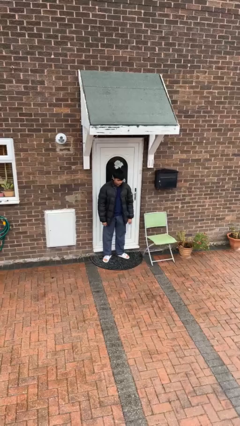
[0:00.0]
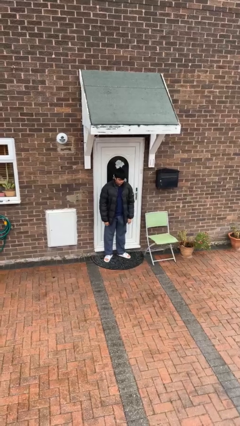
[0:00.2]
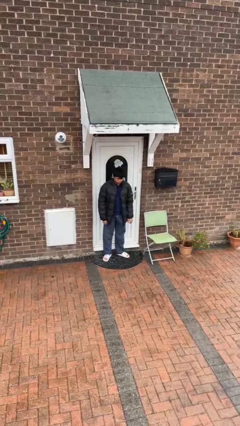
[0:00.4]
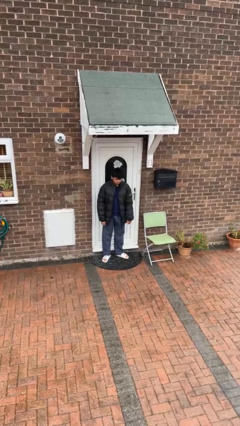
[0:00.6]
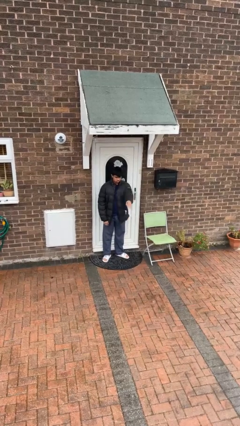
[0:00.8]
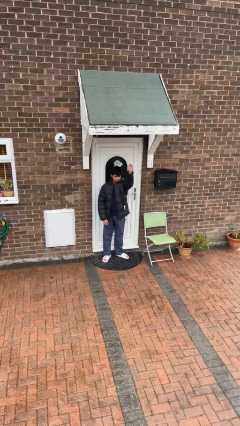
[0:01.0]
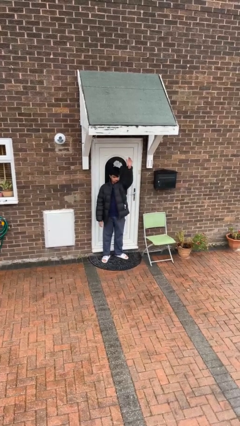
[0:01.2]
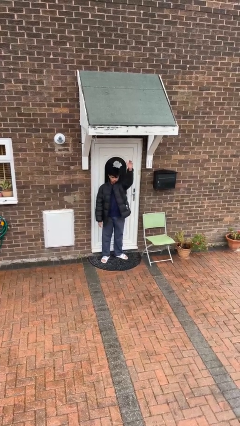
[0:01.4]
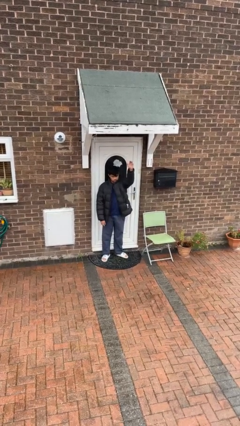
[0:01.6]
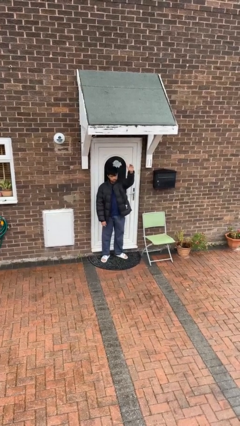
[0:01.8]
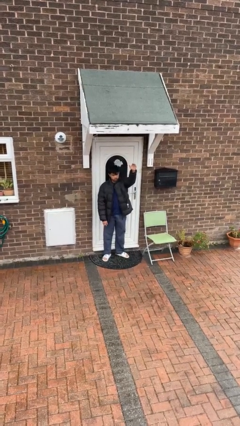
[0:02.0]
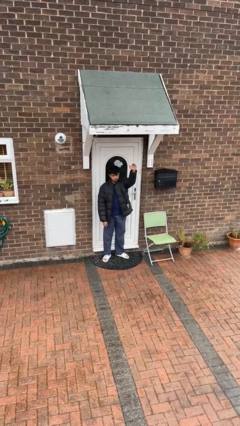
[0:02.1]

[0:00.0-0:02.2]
person gestures swipe up

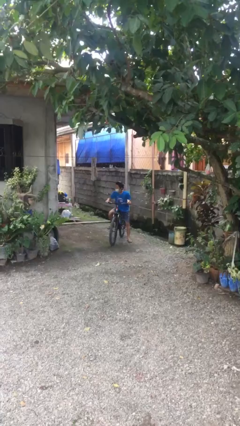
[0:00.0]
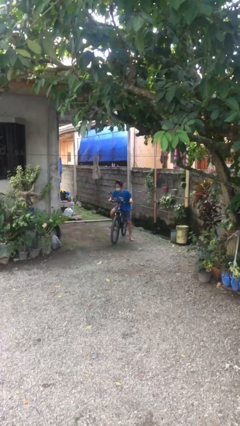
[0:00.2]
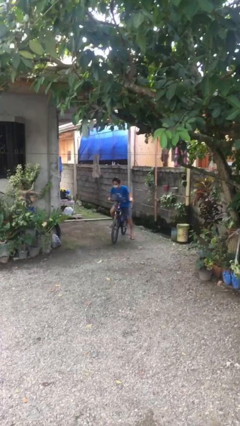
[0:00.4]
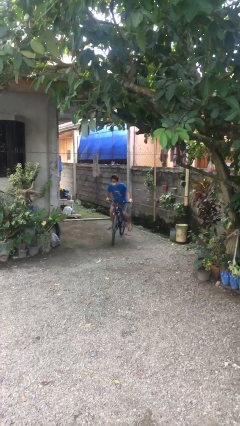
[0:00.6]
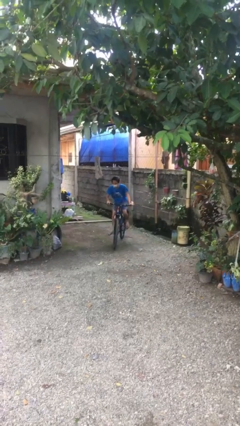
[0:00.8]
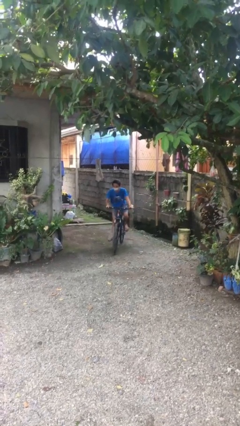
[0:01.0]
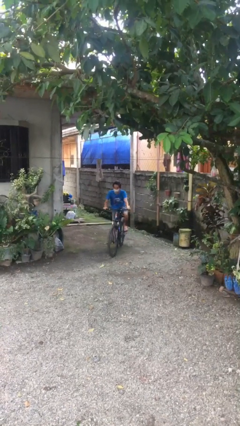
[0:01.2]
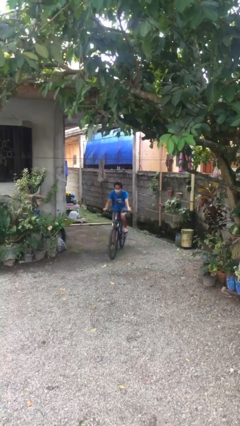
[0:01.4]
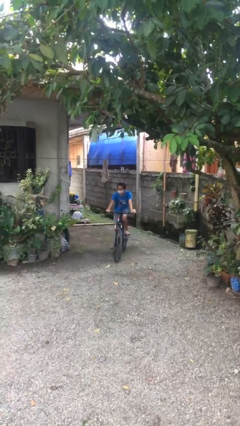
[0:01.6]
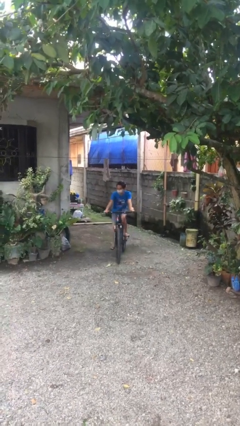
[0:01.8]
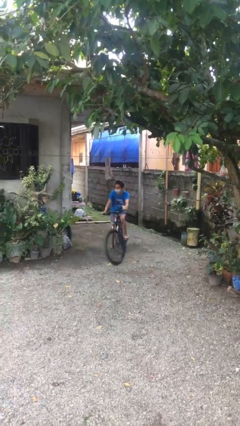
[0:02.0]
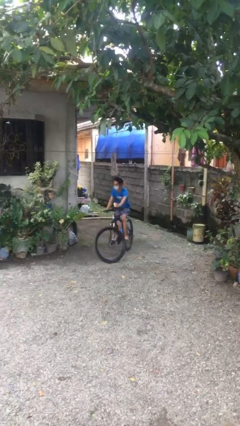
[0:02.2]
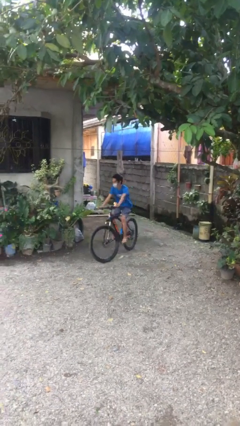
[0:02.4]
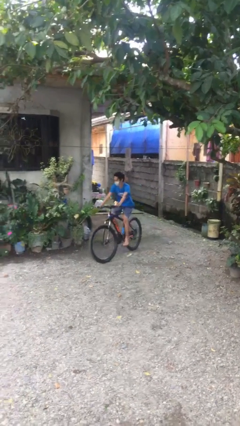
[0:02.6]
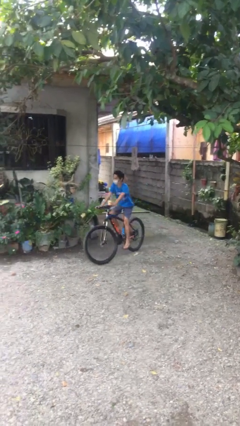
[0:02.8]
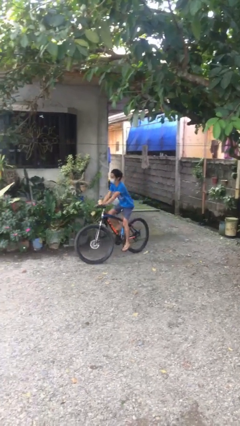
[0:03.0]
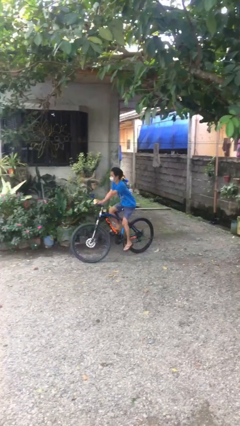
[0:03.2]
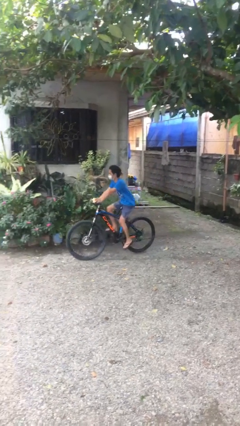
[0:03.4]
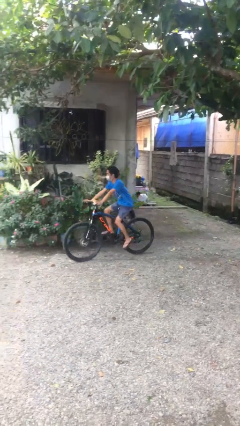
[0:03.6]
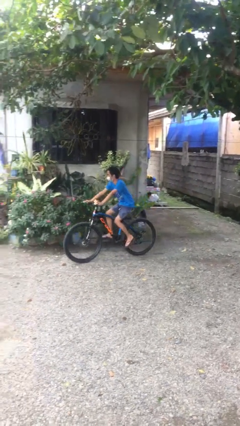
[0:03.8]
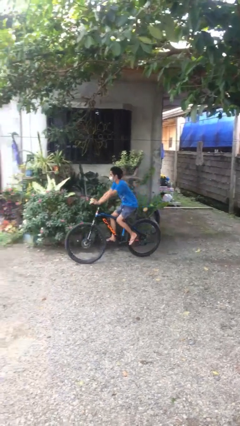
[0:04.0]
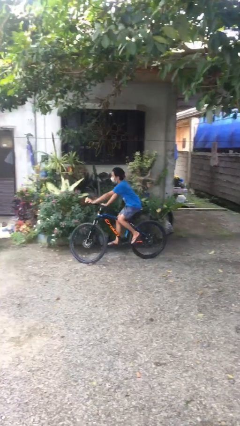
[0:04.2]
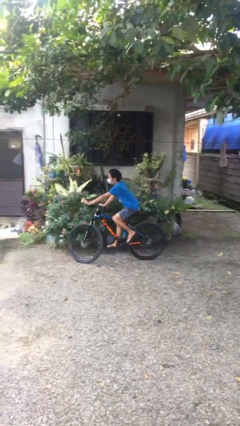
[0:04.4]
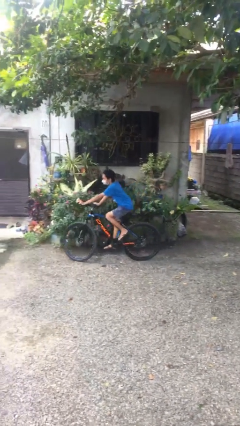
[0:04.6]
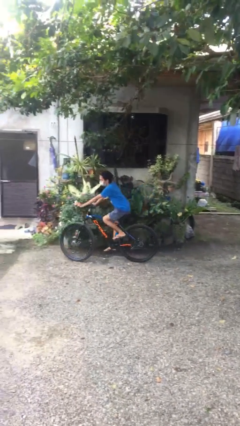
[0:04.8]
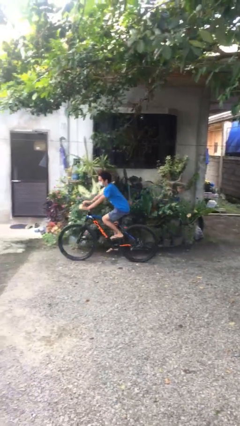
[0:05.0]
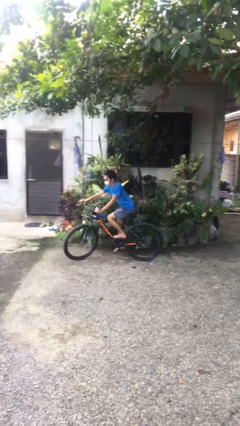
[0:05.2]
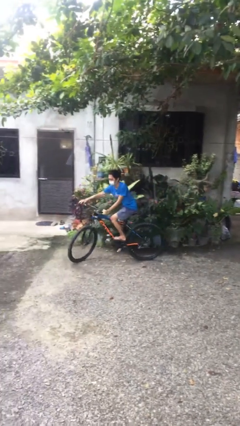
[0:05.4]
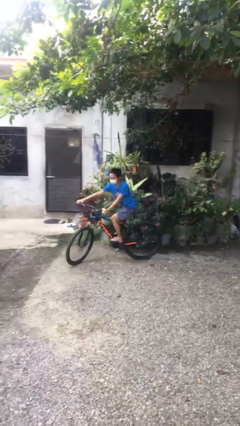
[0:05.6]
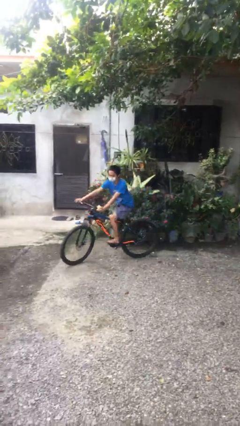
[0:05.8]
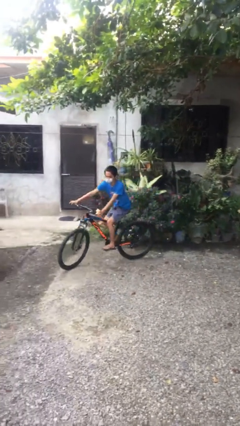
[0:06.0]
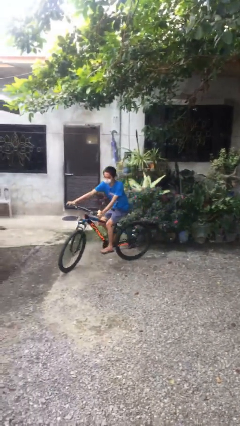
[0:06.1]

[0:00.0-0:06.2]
person rides bicycle

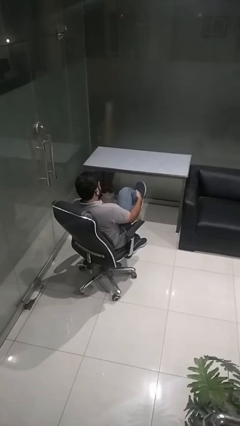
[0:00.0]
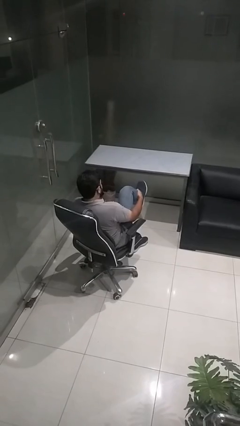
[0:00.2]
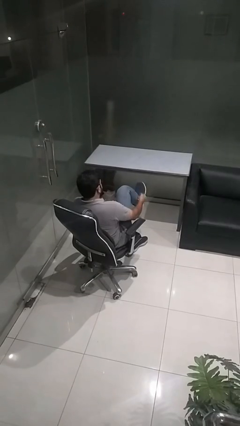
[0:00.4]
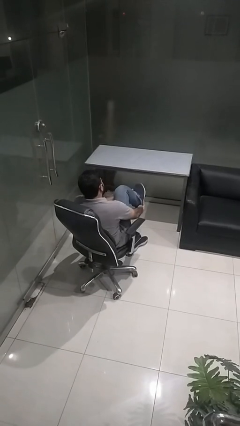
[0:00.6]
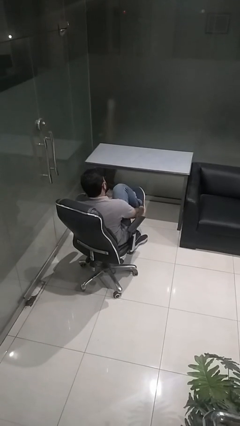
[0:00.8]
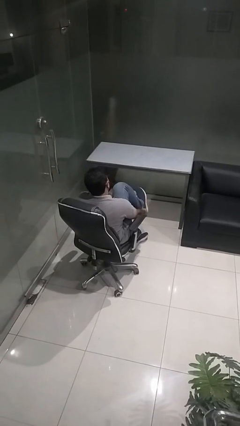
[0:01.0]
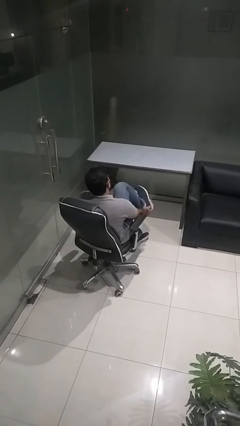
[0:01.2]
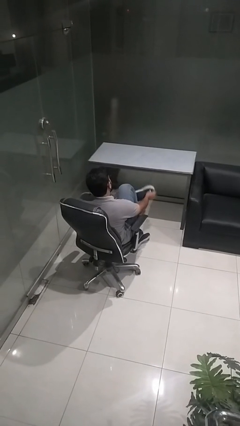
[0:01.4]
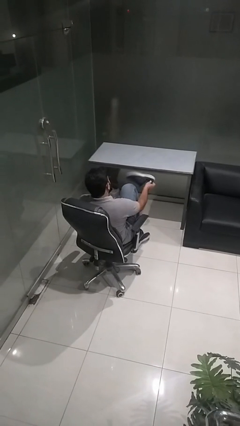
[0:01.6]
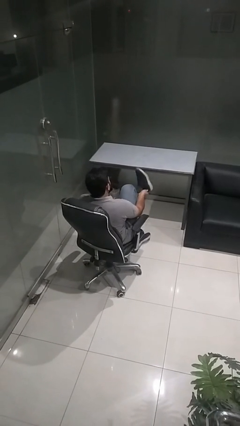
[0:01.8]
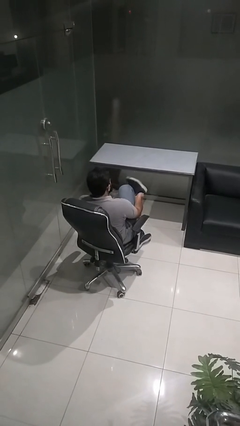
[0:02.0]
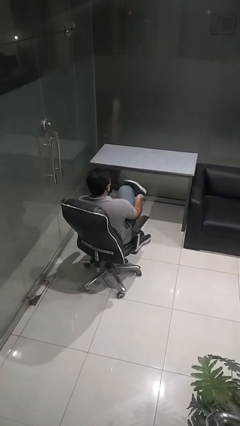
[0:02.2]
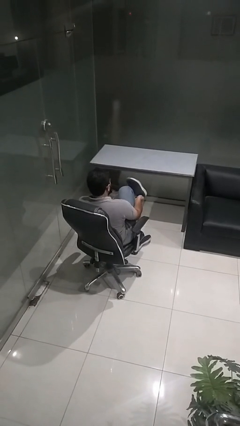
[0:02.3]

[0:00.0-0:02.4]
person takes off shoes

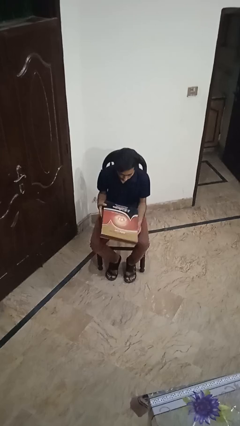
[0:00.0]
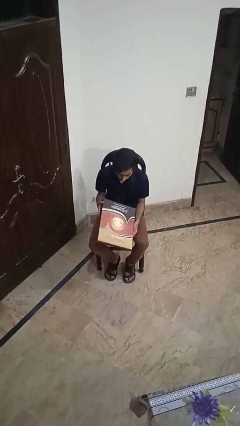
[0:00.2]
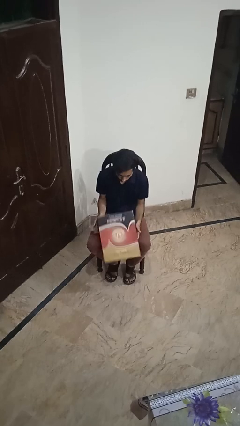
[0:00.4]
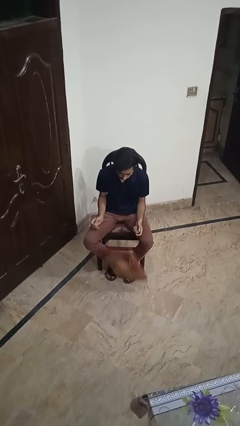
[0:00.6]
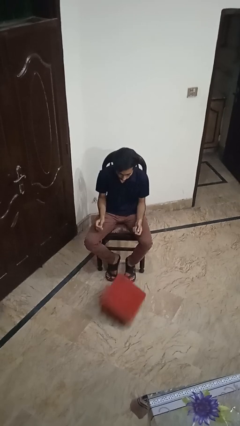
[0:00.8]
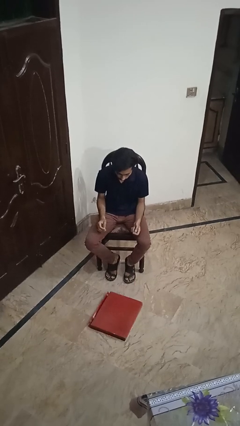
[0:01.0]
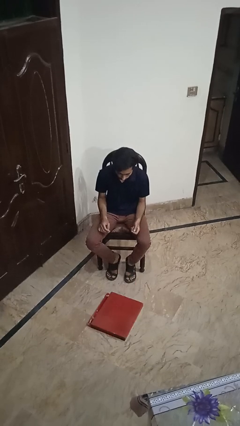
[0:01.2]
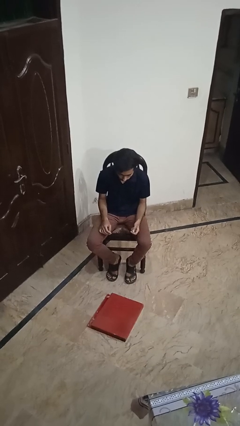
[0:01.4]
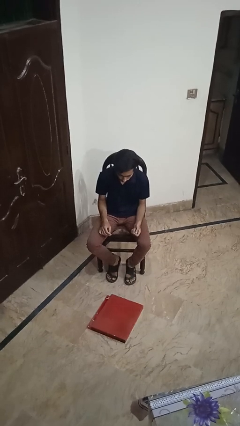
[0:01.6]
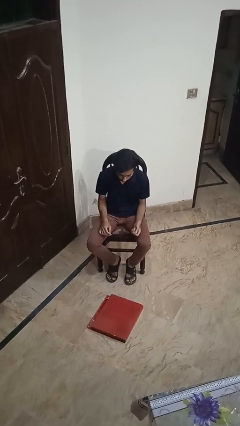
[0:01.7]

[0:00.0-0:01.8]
person drops object

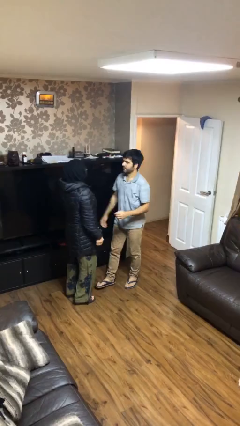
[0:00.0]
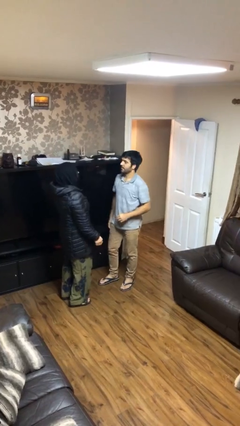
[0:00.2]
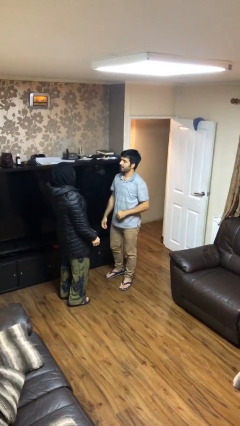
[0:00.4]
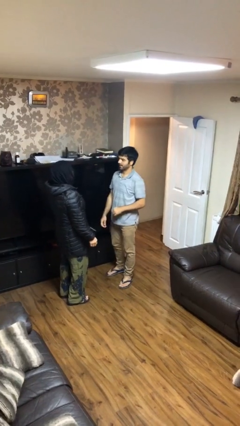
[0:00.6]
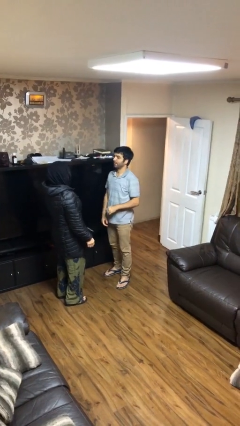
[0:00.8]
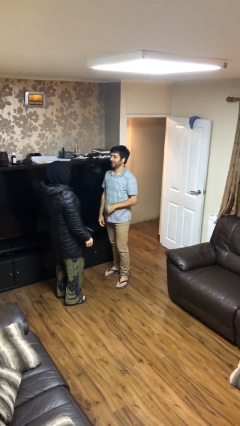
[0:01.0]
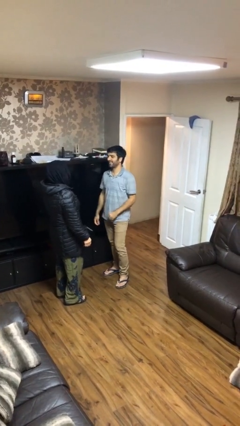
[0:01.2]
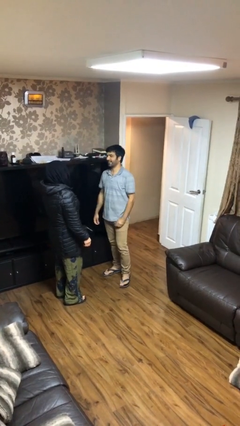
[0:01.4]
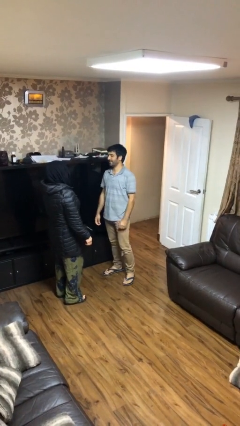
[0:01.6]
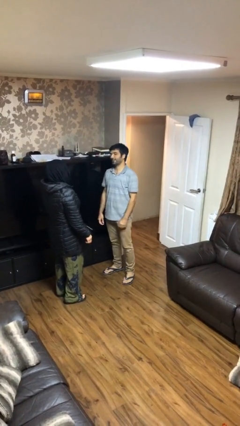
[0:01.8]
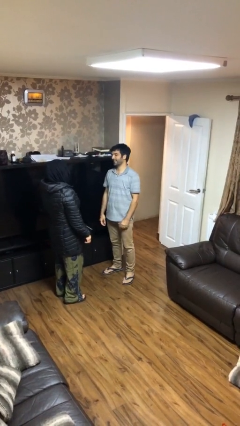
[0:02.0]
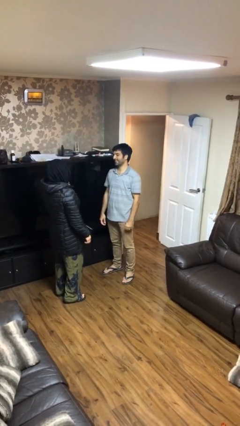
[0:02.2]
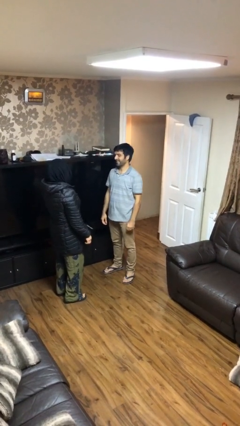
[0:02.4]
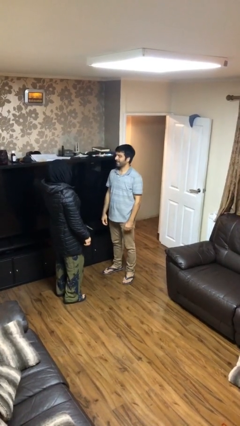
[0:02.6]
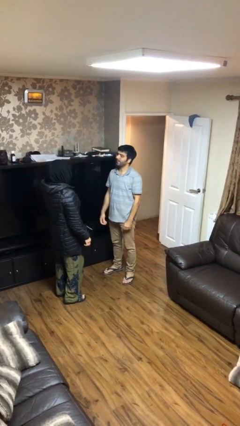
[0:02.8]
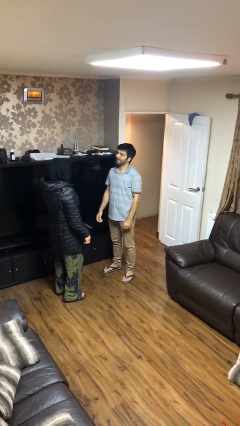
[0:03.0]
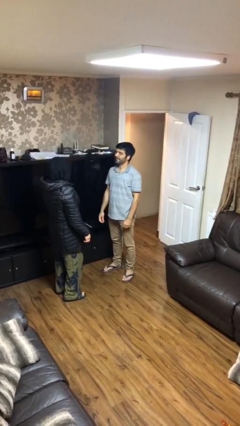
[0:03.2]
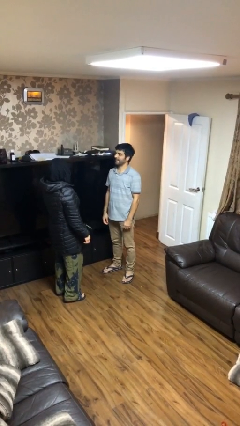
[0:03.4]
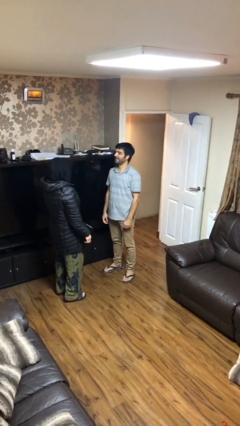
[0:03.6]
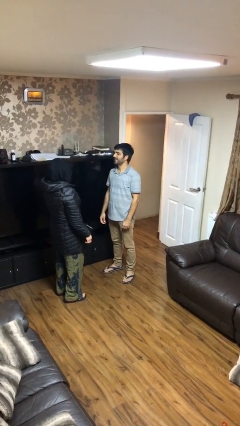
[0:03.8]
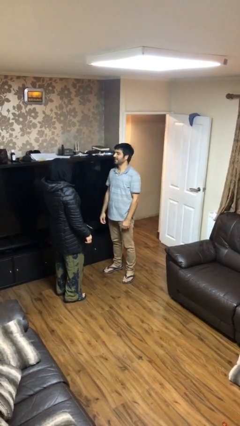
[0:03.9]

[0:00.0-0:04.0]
person talks to person

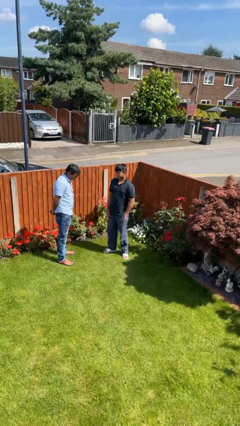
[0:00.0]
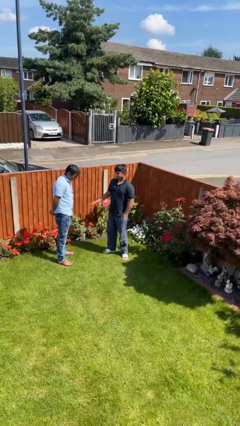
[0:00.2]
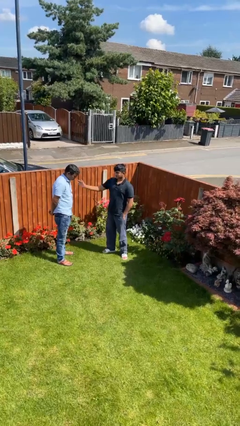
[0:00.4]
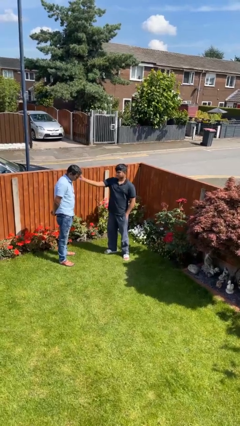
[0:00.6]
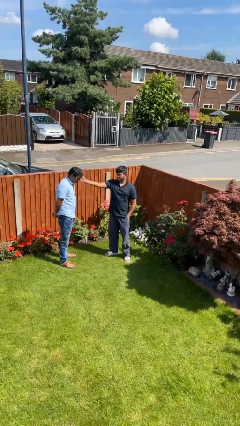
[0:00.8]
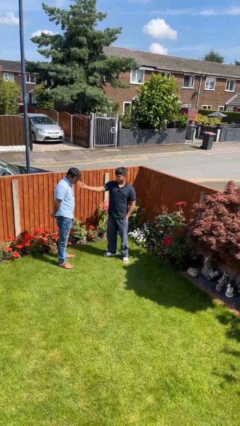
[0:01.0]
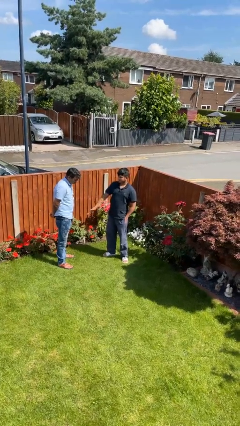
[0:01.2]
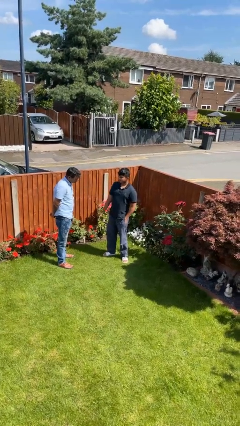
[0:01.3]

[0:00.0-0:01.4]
person touches face of person
